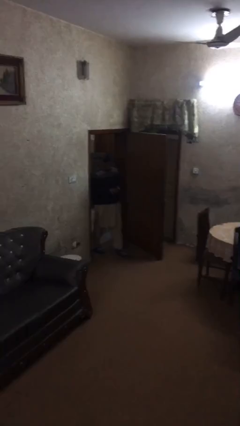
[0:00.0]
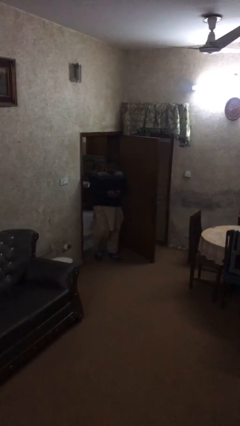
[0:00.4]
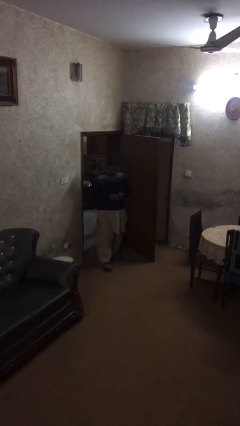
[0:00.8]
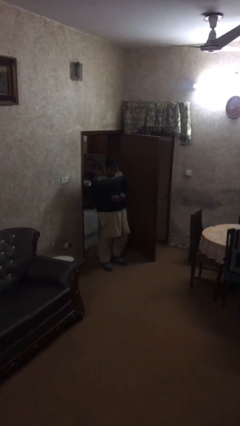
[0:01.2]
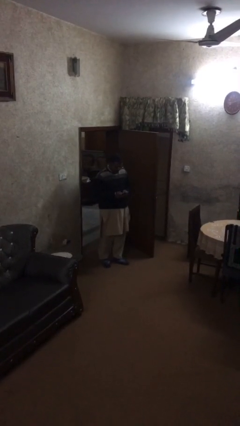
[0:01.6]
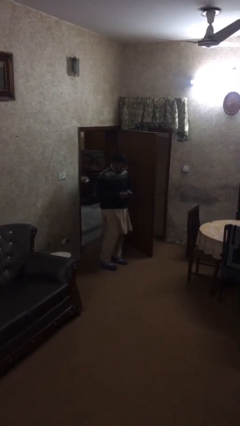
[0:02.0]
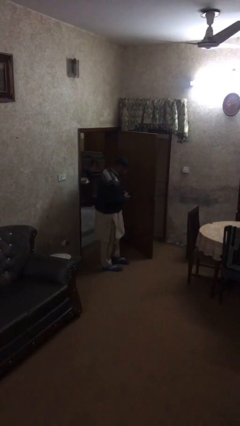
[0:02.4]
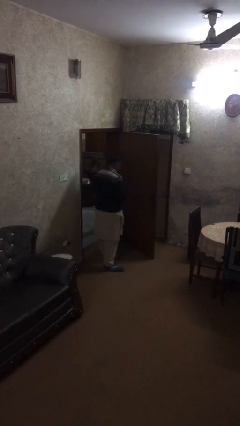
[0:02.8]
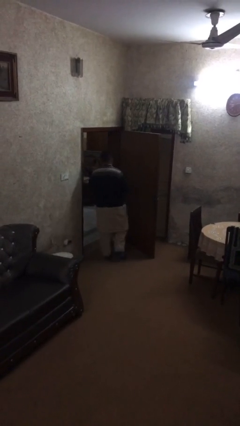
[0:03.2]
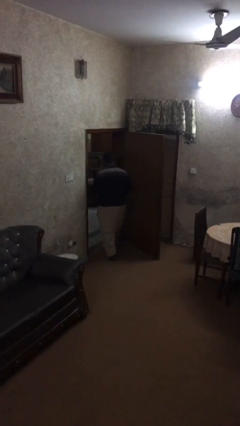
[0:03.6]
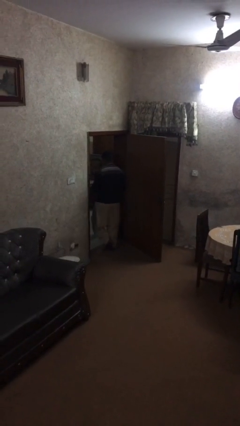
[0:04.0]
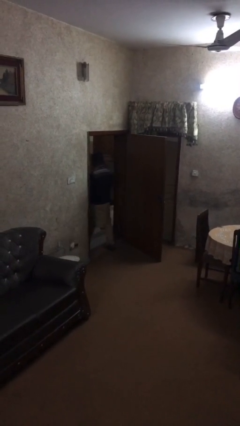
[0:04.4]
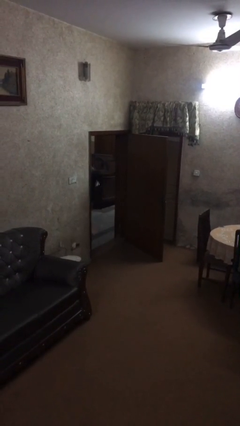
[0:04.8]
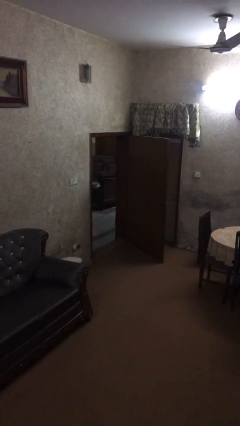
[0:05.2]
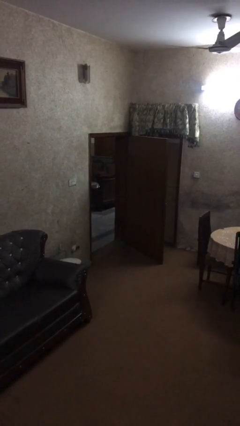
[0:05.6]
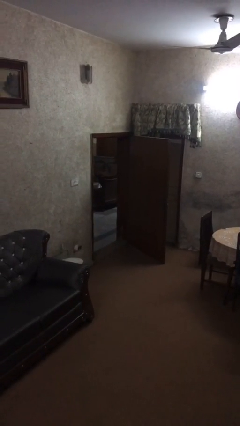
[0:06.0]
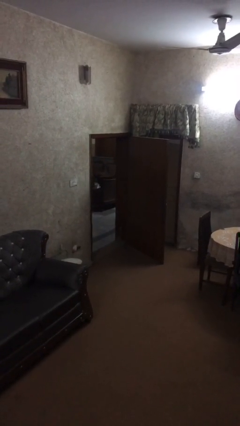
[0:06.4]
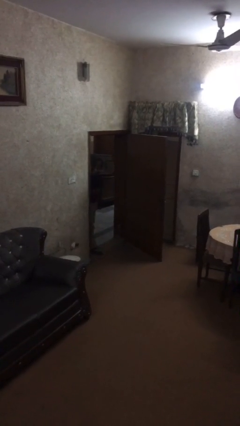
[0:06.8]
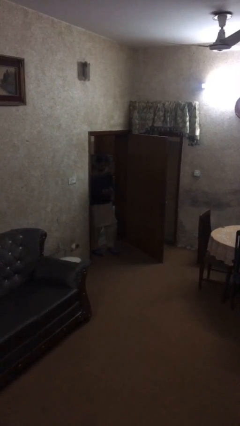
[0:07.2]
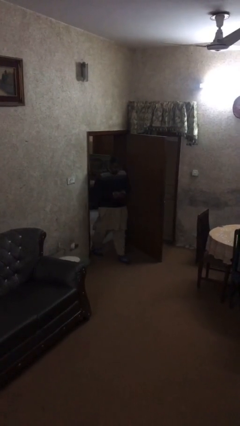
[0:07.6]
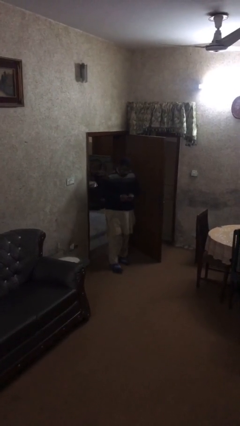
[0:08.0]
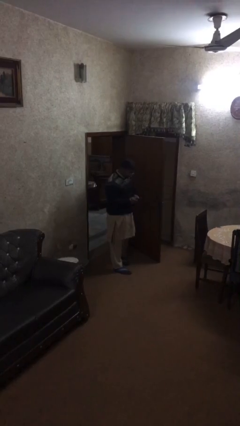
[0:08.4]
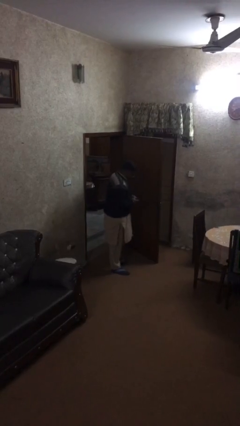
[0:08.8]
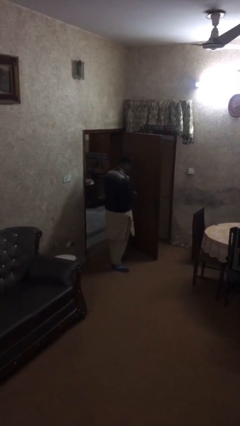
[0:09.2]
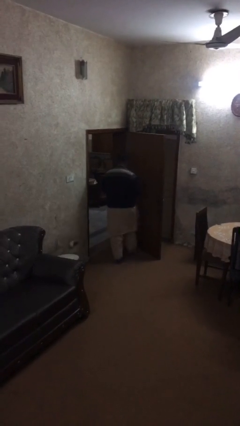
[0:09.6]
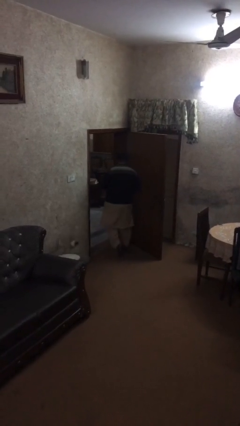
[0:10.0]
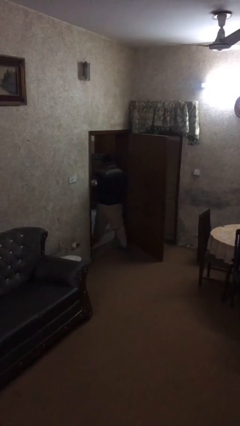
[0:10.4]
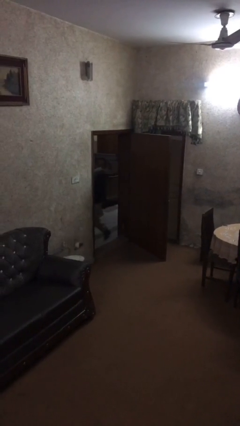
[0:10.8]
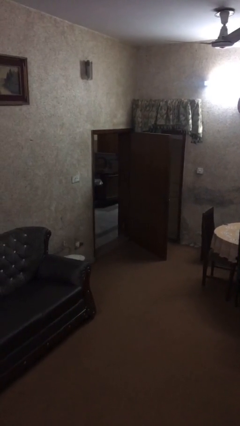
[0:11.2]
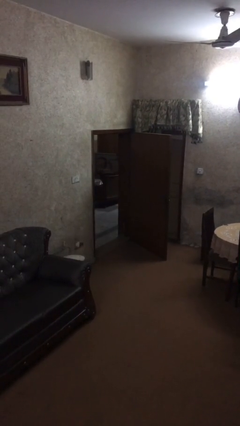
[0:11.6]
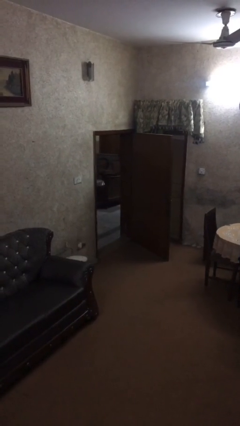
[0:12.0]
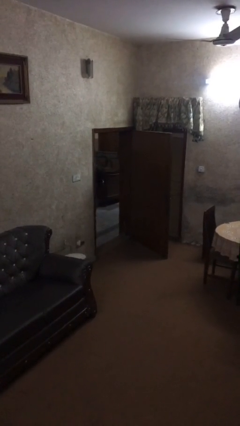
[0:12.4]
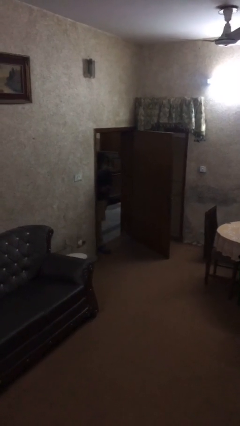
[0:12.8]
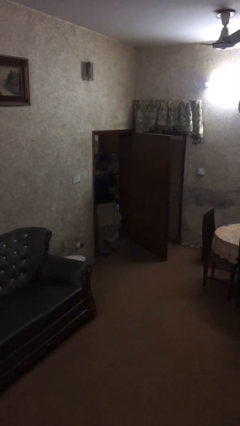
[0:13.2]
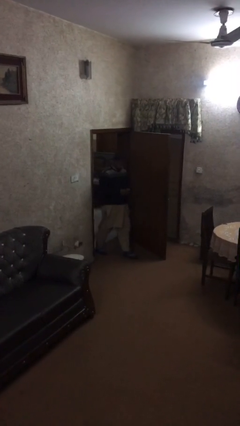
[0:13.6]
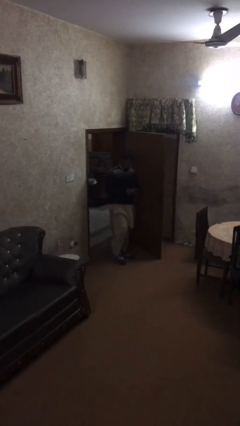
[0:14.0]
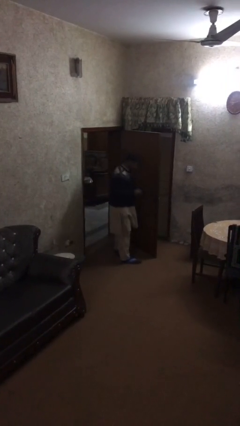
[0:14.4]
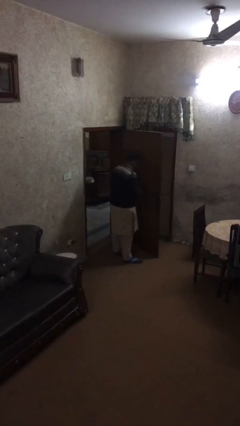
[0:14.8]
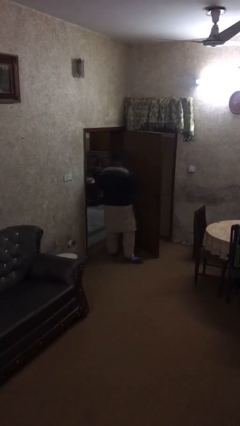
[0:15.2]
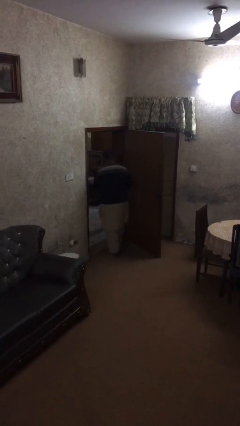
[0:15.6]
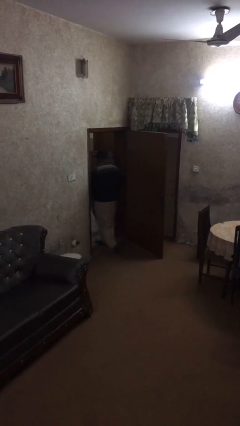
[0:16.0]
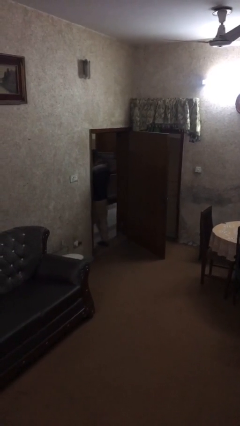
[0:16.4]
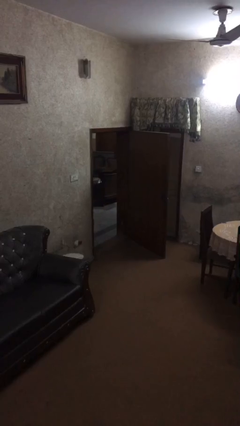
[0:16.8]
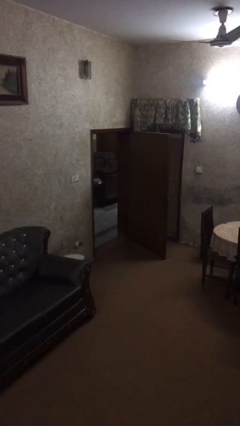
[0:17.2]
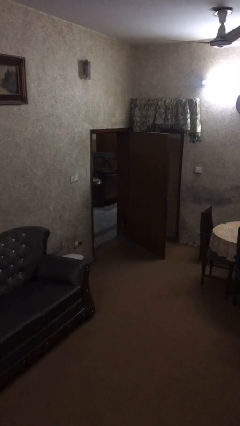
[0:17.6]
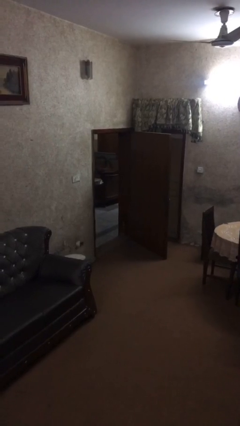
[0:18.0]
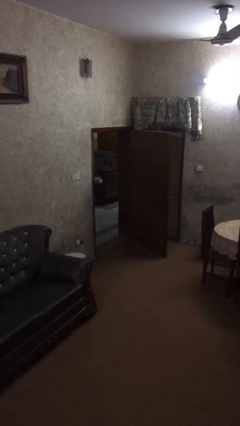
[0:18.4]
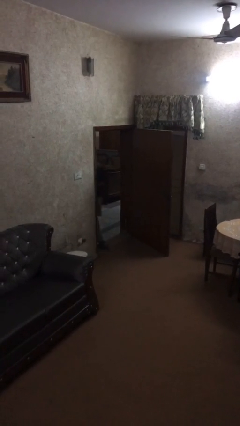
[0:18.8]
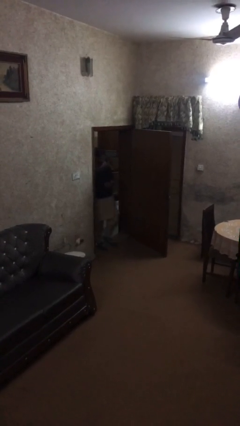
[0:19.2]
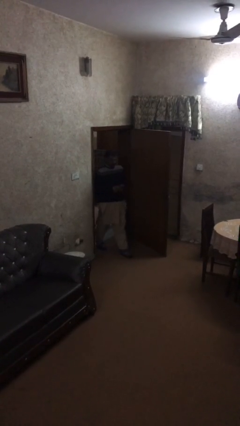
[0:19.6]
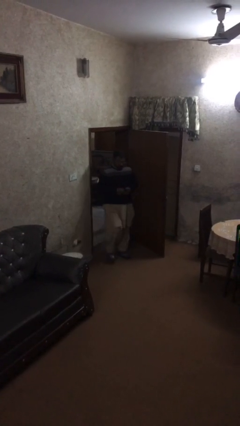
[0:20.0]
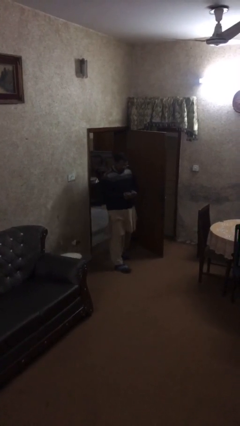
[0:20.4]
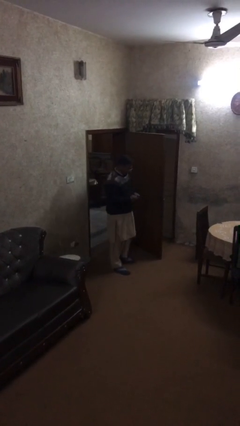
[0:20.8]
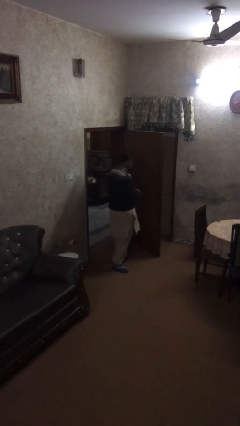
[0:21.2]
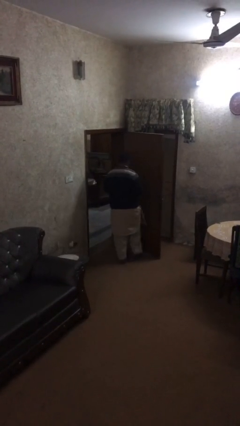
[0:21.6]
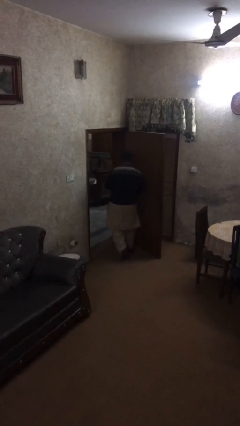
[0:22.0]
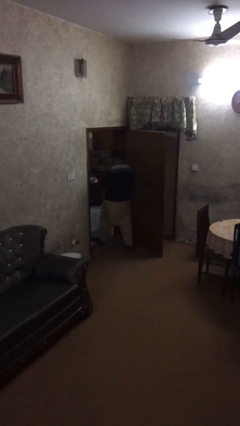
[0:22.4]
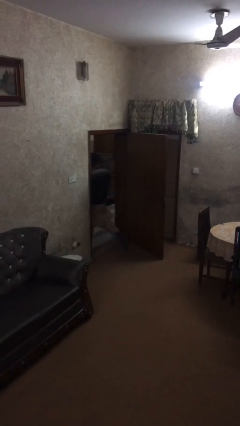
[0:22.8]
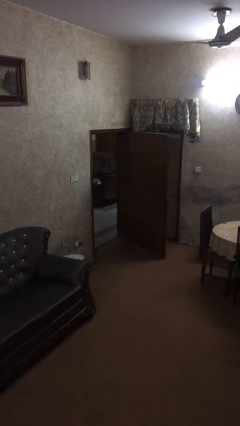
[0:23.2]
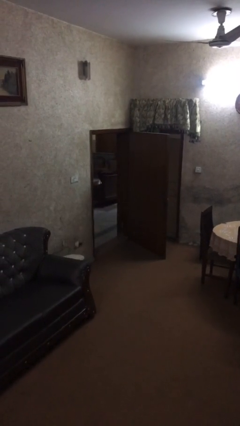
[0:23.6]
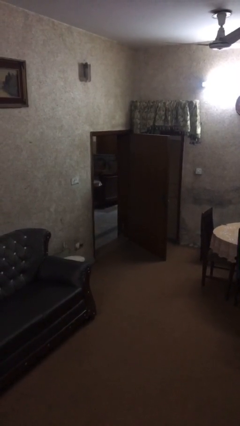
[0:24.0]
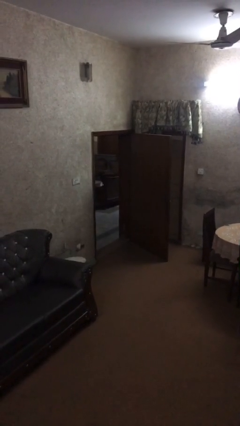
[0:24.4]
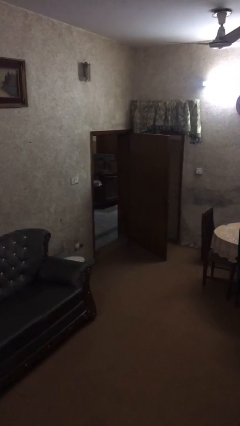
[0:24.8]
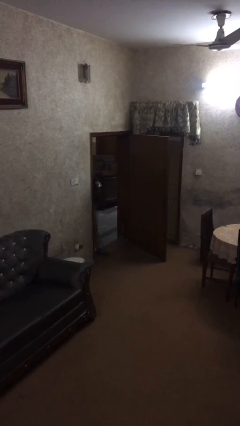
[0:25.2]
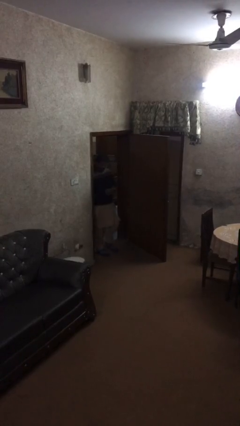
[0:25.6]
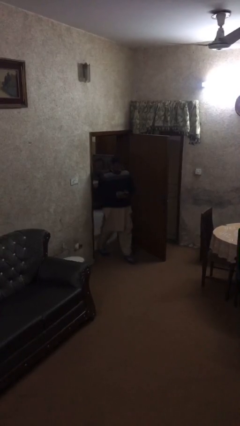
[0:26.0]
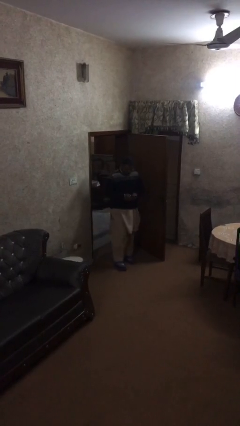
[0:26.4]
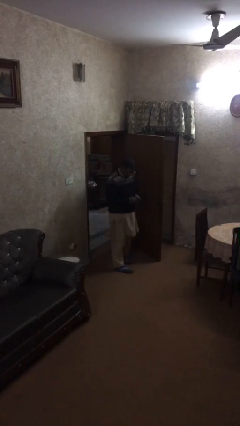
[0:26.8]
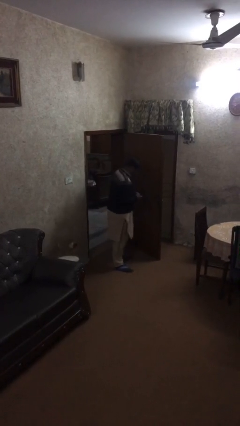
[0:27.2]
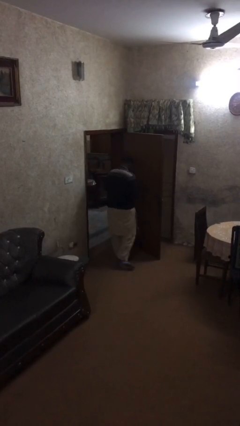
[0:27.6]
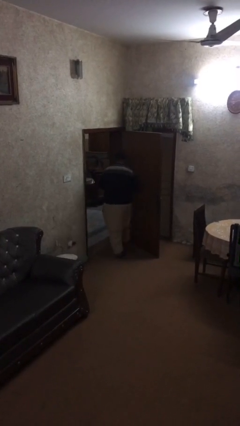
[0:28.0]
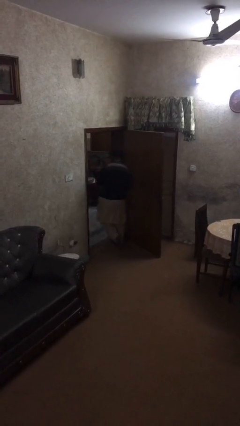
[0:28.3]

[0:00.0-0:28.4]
person texts on phone

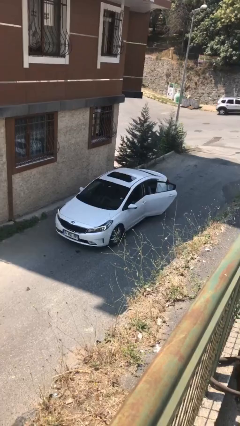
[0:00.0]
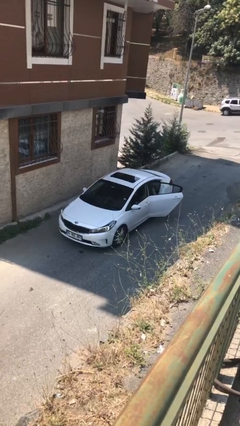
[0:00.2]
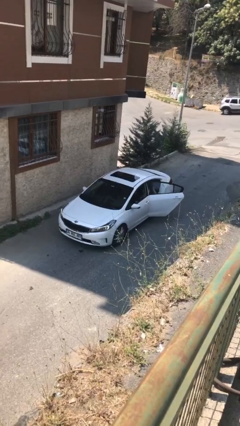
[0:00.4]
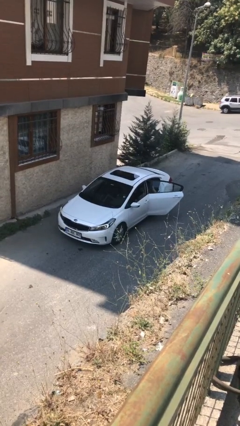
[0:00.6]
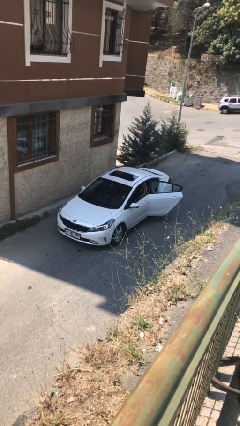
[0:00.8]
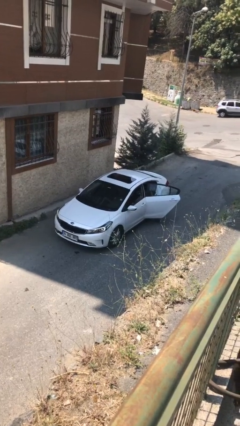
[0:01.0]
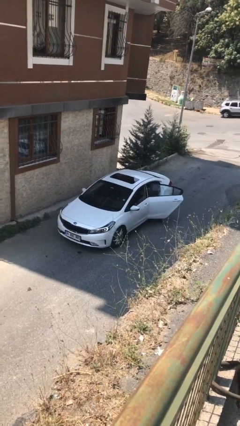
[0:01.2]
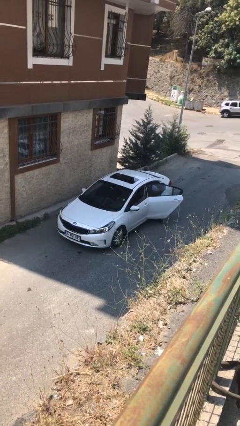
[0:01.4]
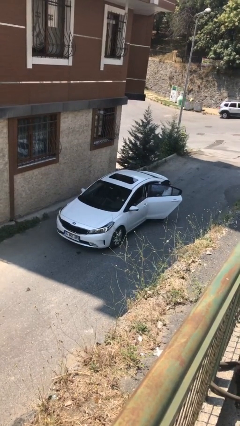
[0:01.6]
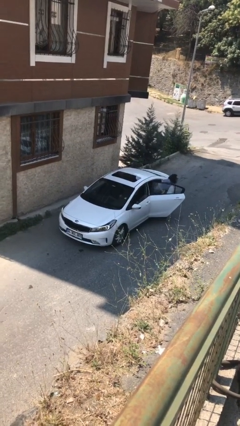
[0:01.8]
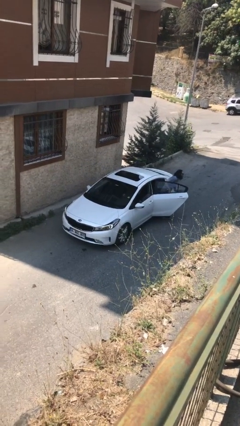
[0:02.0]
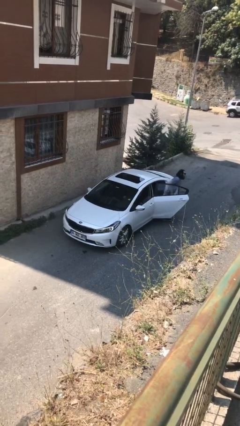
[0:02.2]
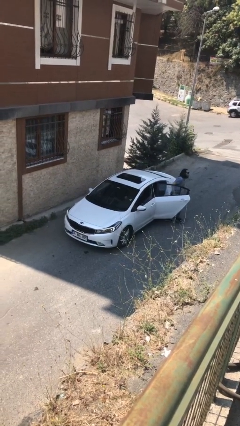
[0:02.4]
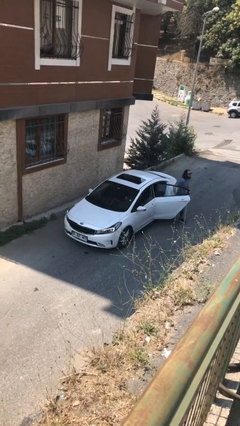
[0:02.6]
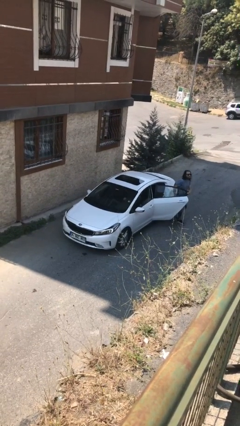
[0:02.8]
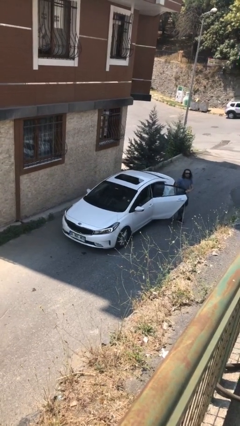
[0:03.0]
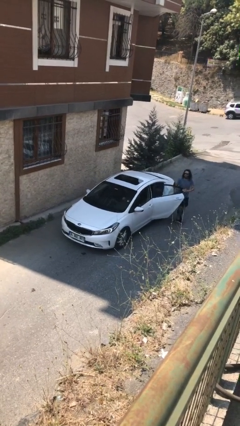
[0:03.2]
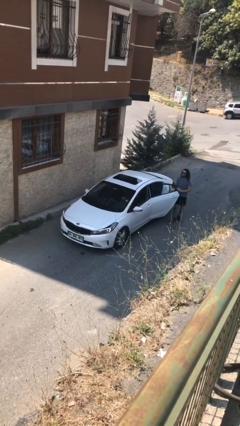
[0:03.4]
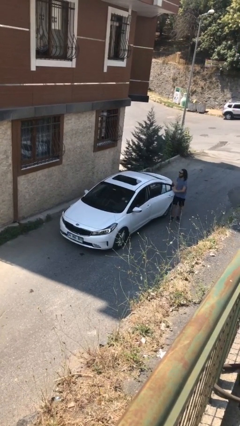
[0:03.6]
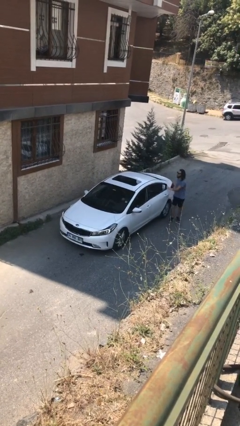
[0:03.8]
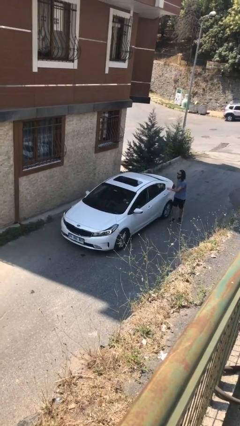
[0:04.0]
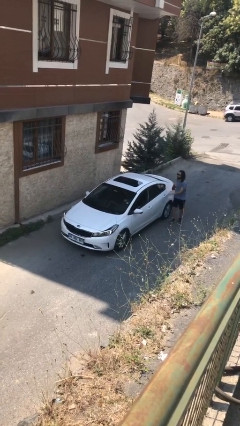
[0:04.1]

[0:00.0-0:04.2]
car drops off person
